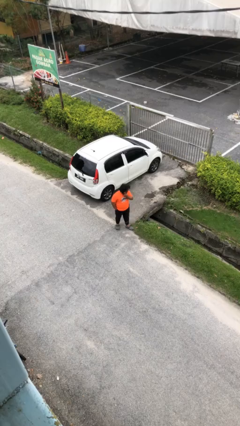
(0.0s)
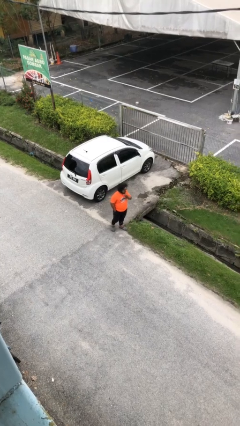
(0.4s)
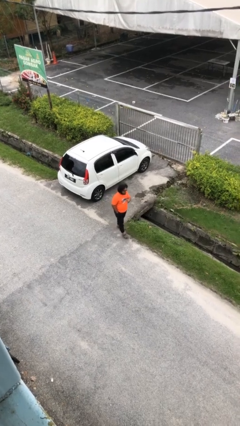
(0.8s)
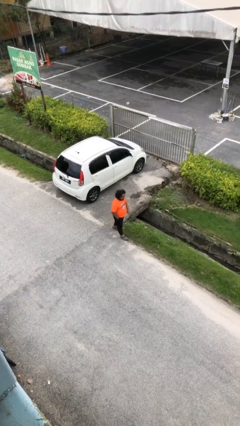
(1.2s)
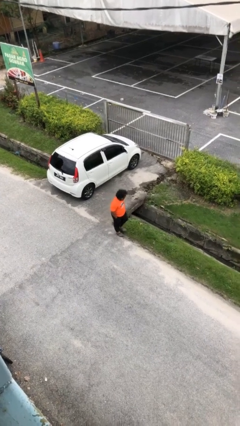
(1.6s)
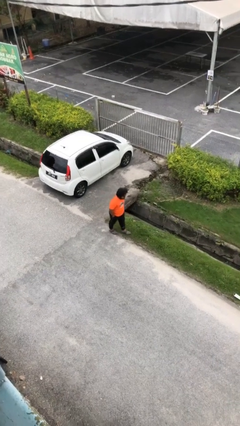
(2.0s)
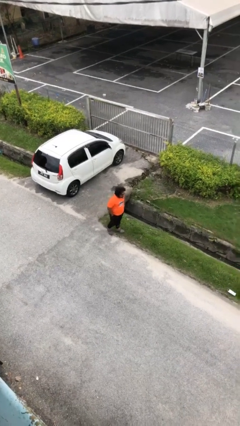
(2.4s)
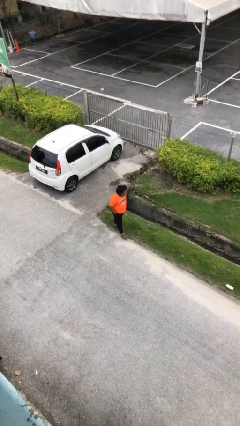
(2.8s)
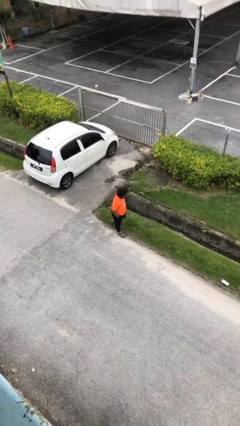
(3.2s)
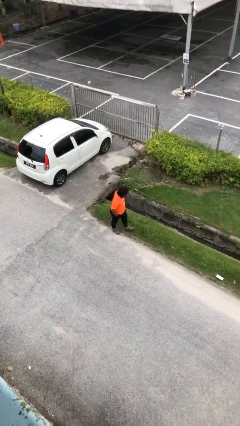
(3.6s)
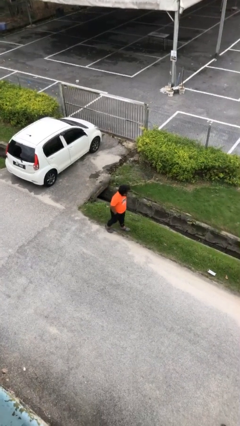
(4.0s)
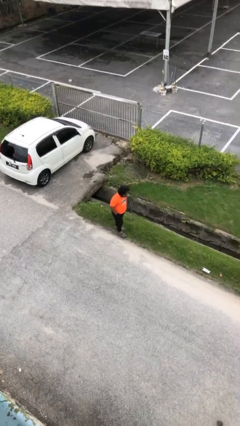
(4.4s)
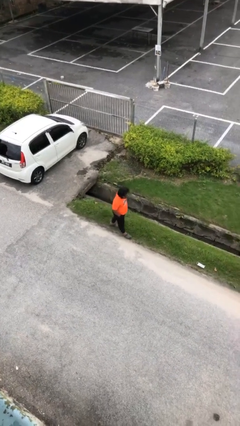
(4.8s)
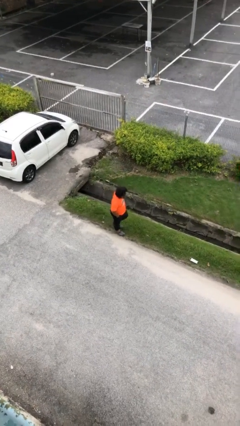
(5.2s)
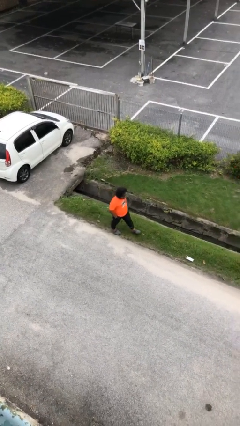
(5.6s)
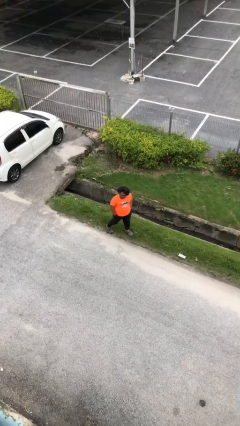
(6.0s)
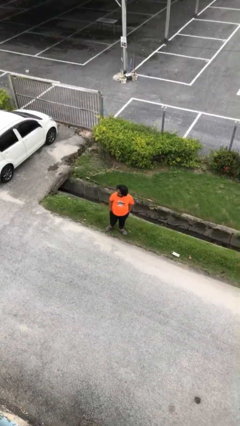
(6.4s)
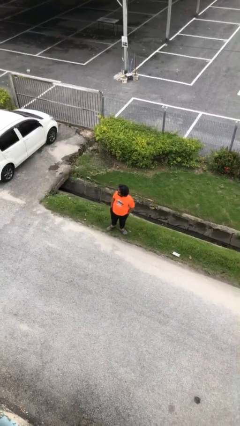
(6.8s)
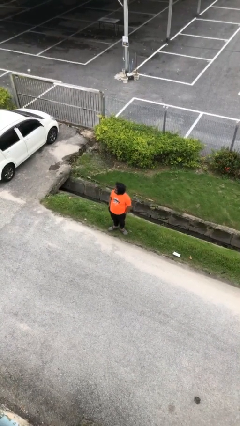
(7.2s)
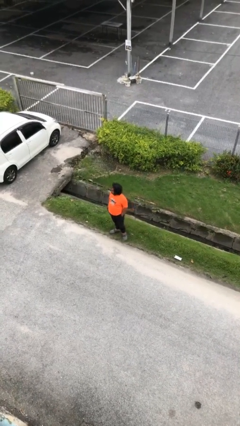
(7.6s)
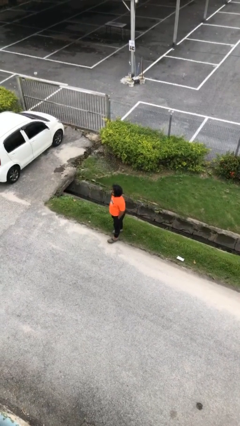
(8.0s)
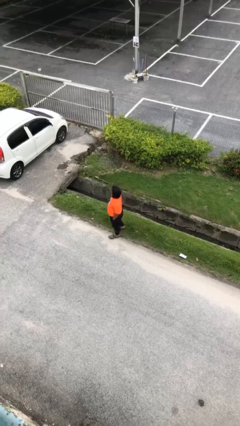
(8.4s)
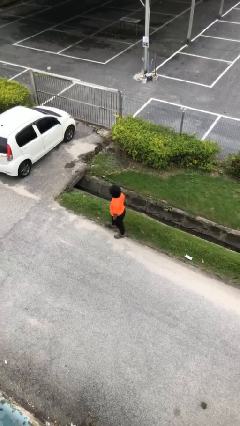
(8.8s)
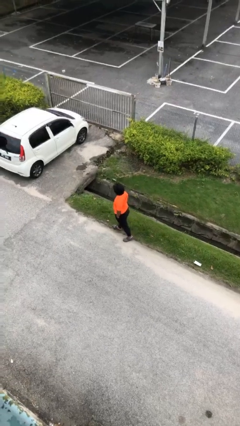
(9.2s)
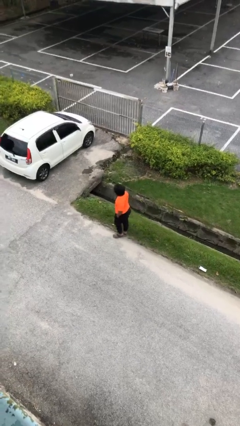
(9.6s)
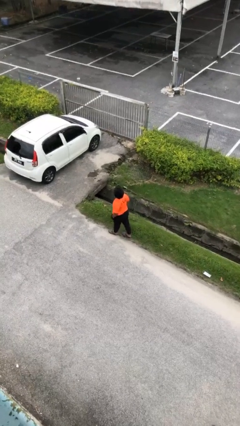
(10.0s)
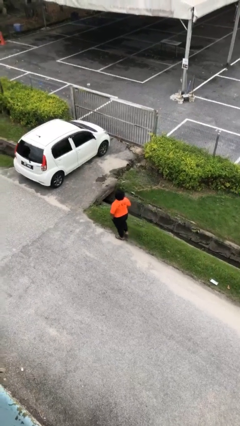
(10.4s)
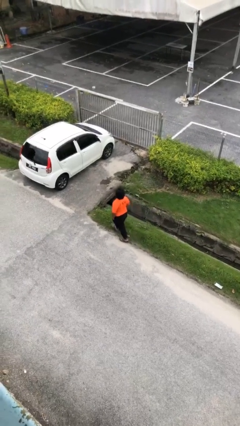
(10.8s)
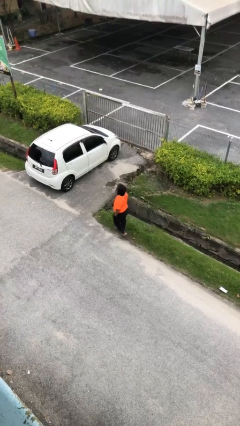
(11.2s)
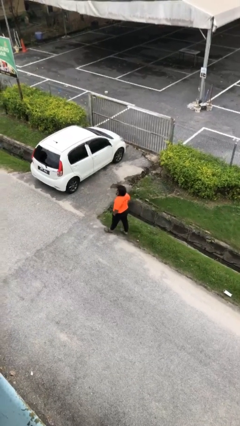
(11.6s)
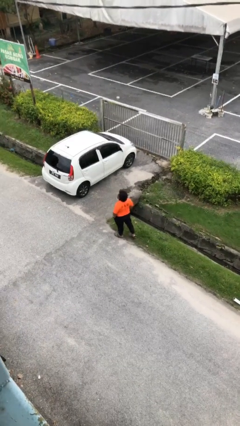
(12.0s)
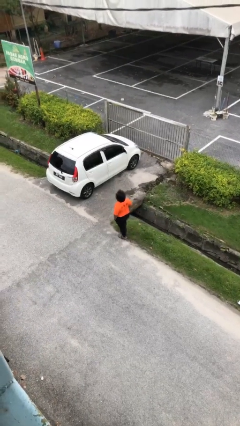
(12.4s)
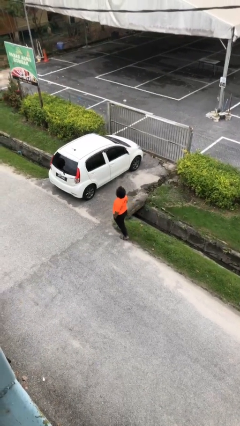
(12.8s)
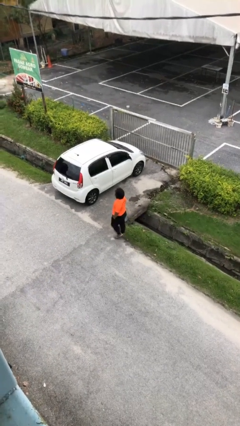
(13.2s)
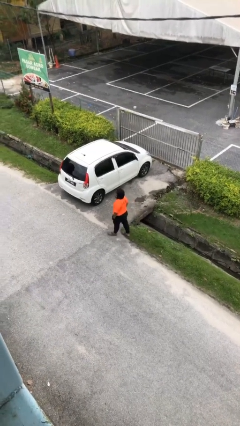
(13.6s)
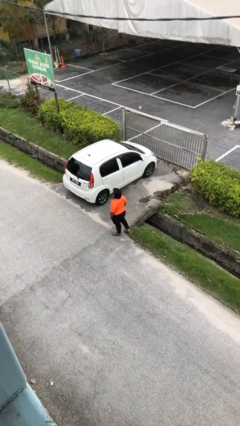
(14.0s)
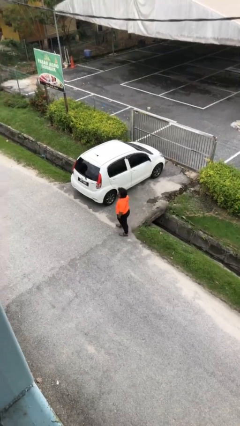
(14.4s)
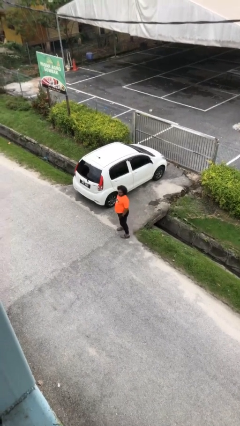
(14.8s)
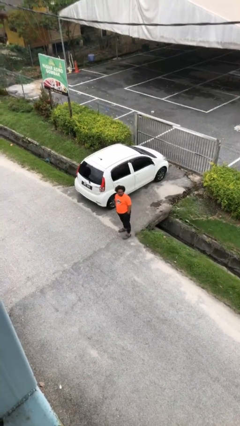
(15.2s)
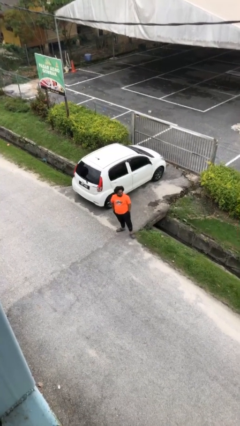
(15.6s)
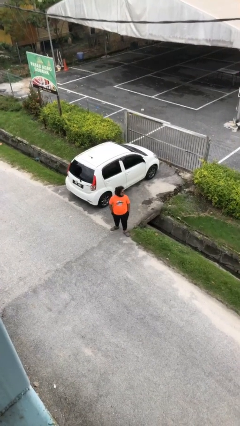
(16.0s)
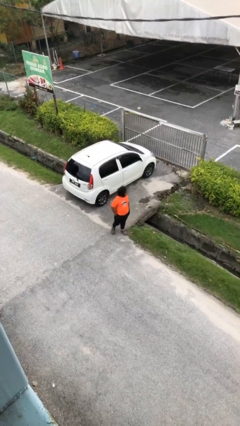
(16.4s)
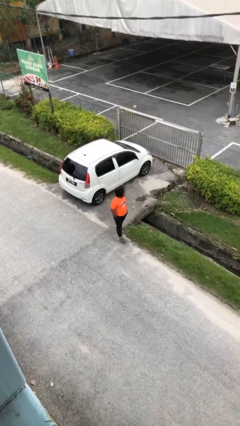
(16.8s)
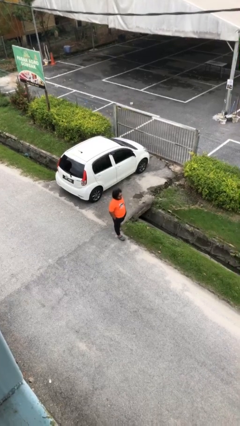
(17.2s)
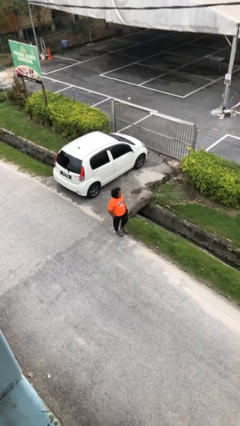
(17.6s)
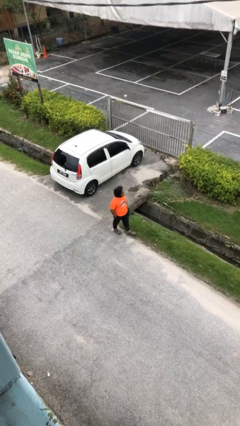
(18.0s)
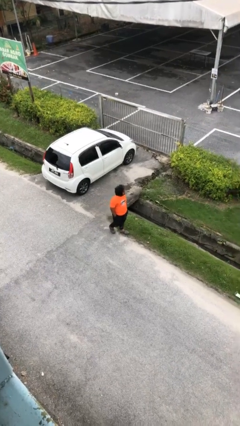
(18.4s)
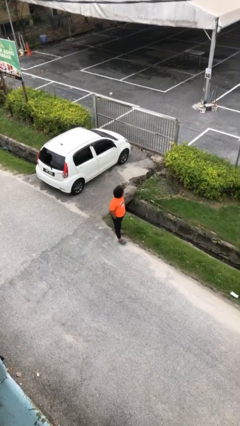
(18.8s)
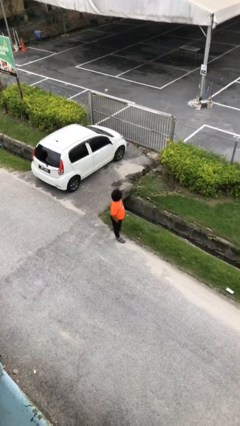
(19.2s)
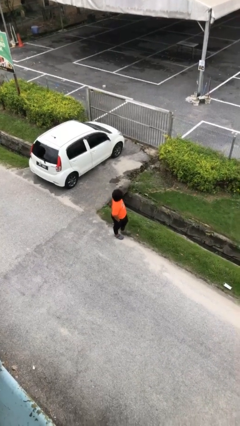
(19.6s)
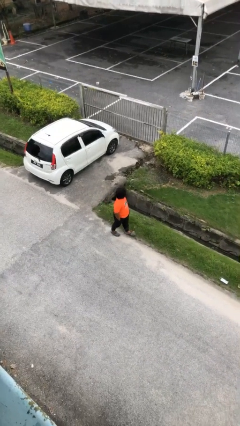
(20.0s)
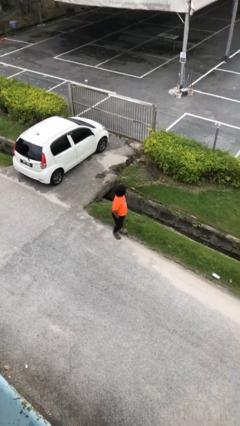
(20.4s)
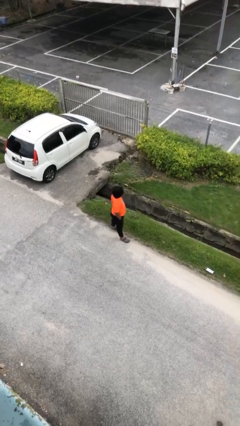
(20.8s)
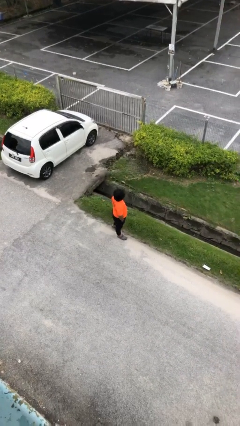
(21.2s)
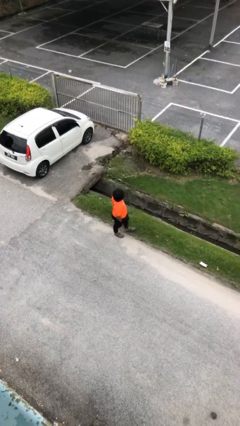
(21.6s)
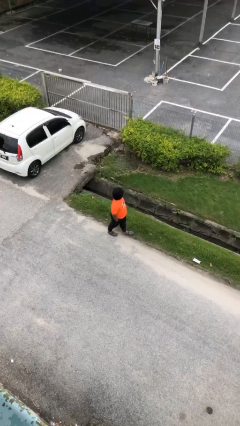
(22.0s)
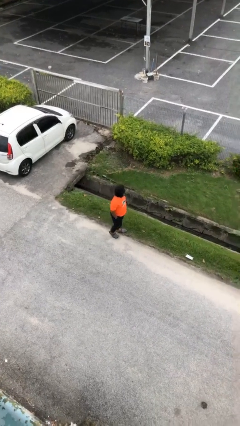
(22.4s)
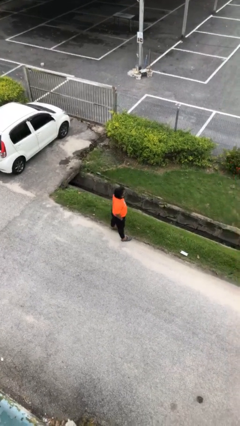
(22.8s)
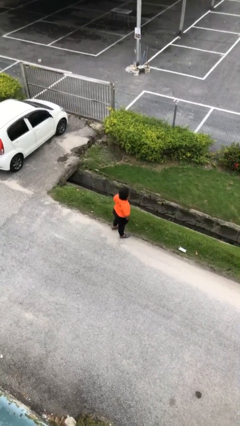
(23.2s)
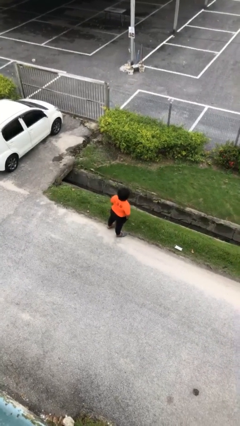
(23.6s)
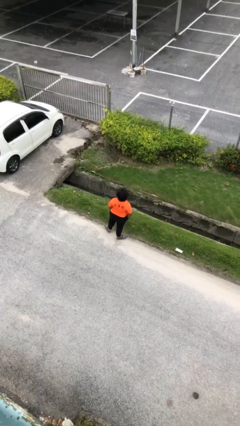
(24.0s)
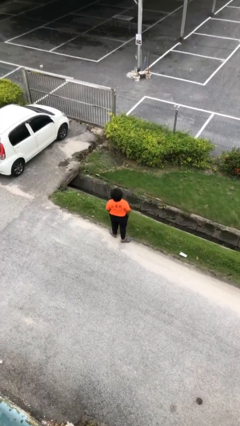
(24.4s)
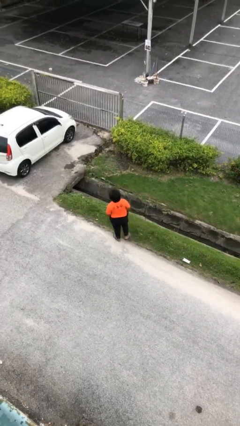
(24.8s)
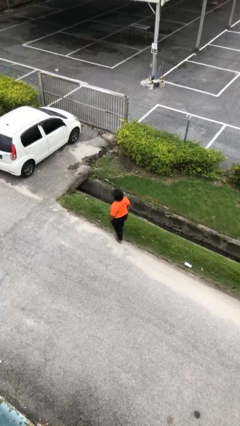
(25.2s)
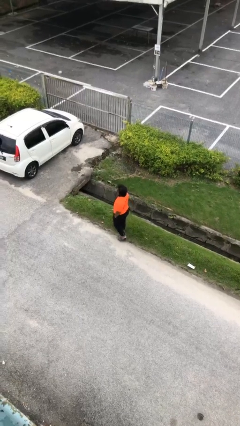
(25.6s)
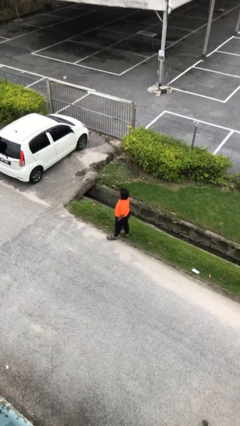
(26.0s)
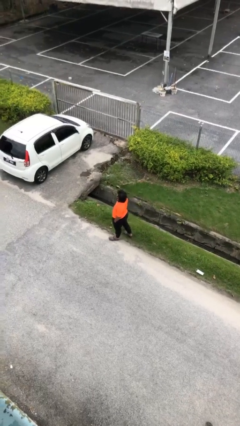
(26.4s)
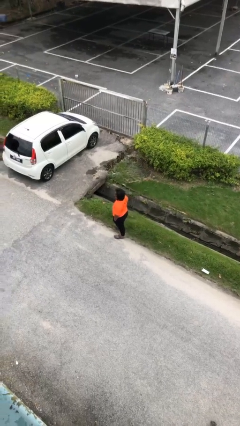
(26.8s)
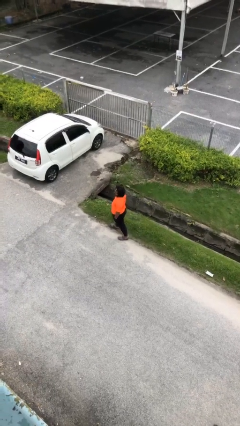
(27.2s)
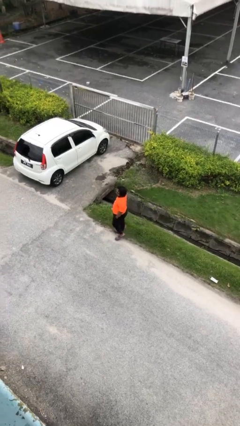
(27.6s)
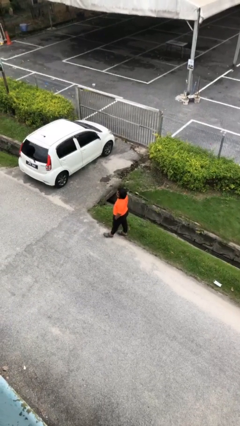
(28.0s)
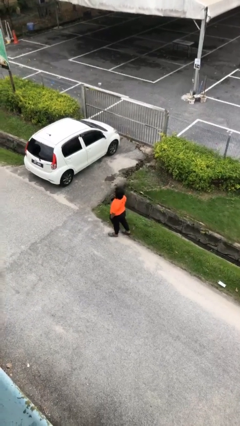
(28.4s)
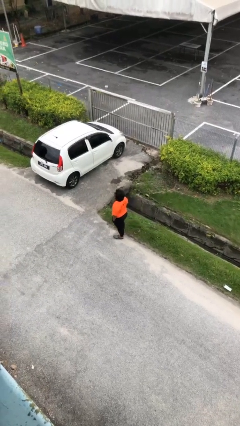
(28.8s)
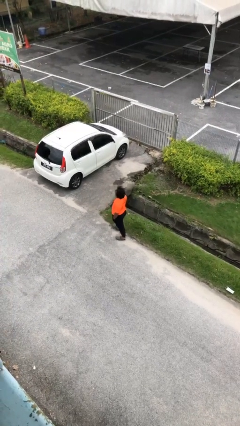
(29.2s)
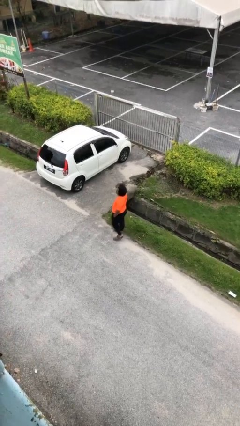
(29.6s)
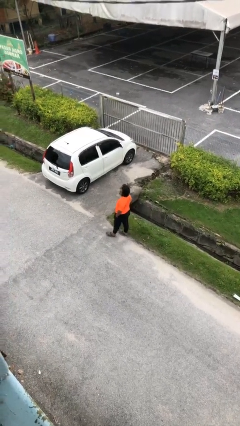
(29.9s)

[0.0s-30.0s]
person walks

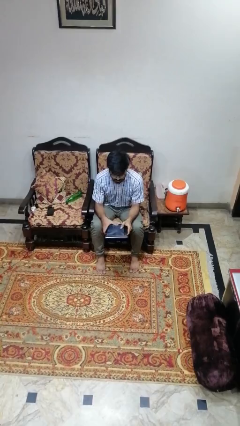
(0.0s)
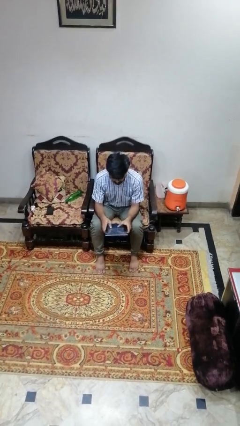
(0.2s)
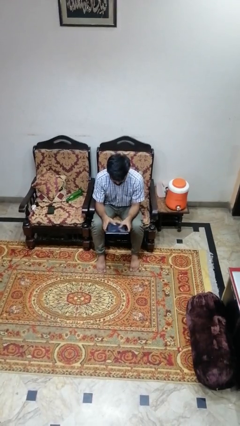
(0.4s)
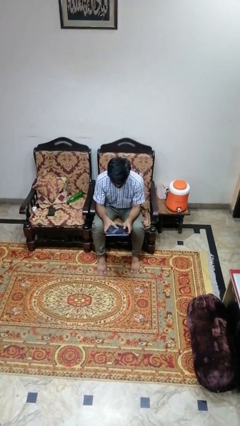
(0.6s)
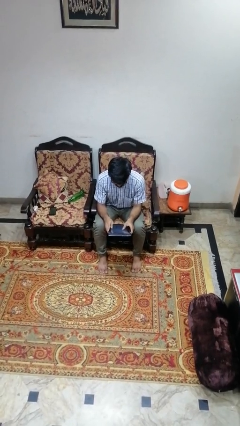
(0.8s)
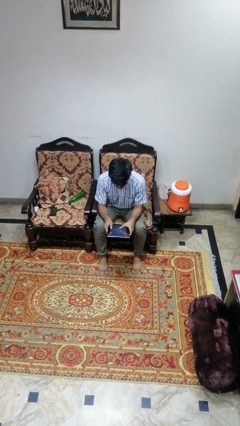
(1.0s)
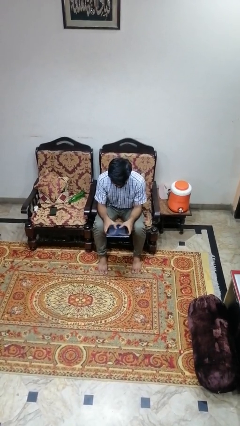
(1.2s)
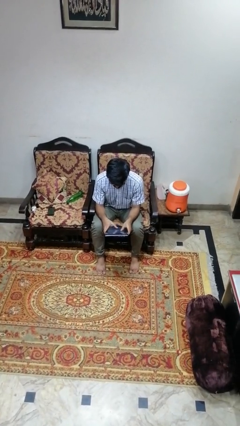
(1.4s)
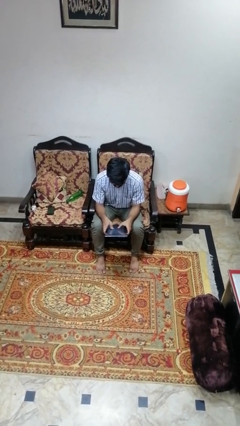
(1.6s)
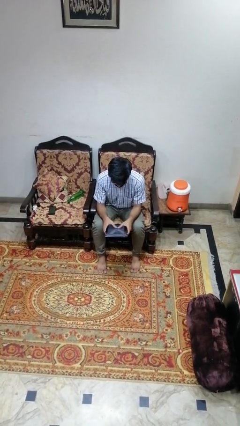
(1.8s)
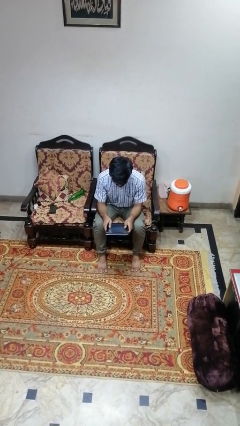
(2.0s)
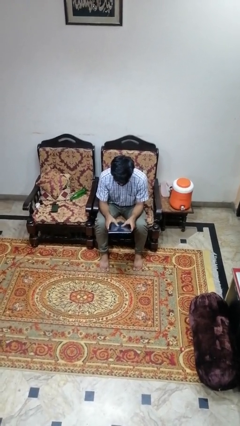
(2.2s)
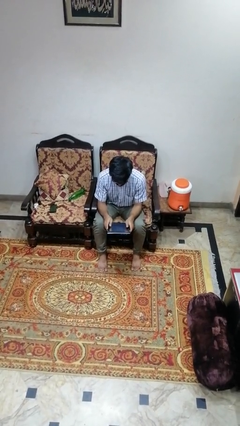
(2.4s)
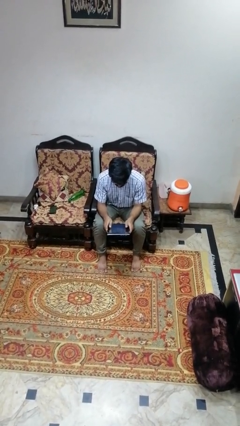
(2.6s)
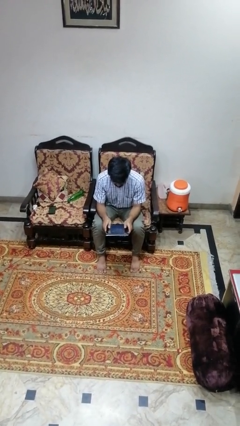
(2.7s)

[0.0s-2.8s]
person interacts with tablet

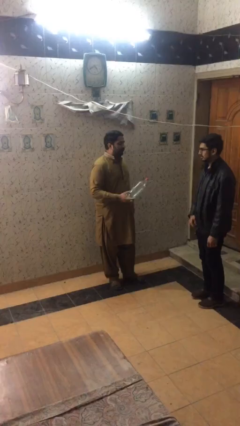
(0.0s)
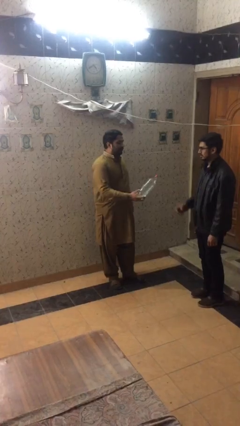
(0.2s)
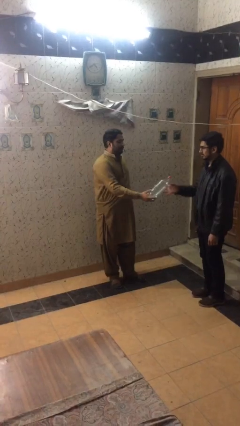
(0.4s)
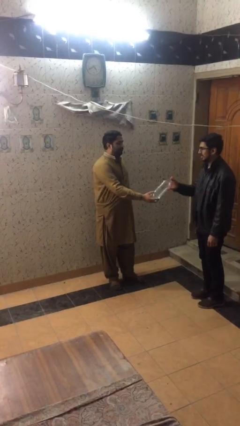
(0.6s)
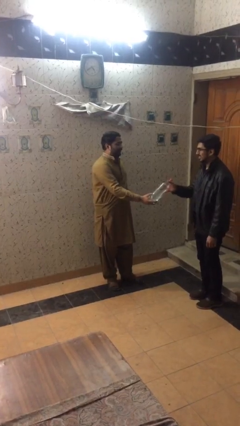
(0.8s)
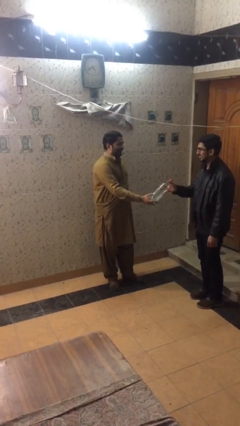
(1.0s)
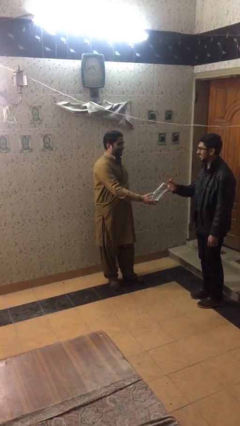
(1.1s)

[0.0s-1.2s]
person transfers object to person
